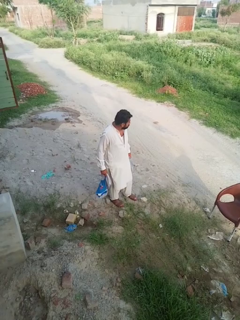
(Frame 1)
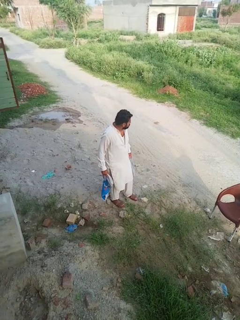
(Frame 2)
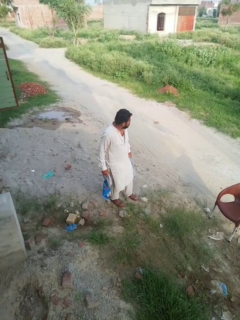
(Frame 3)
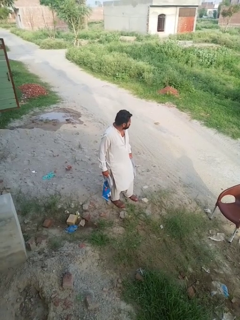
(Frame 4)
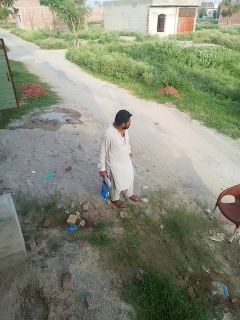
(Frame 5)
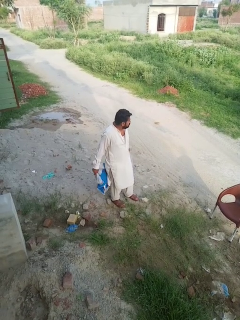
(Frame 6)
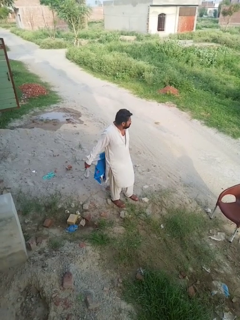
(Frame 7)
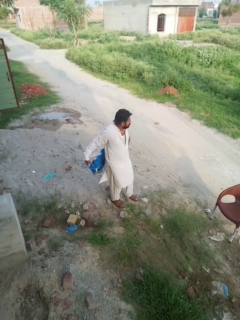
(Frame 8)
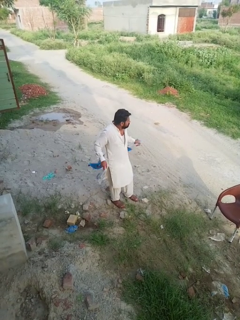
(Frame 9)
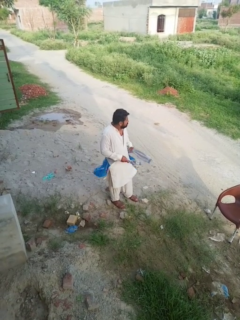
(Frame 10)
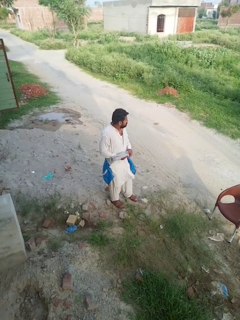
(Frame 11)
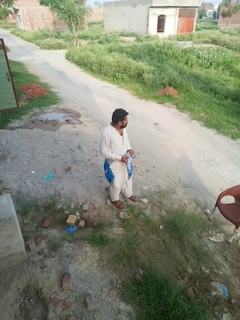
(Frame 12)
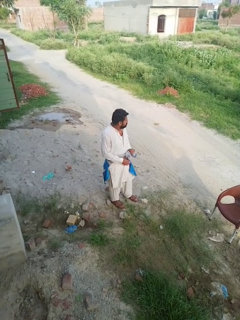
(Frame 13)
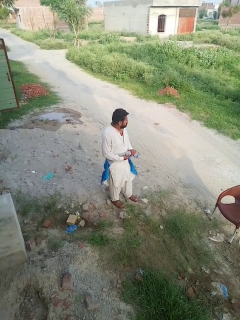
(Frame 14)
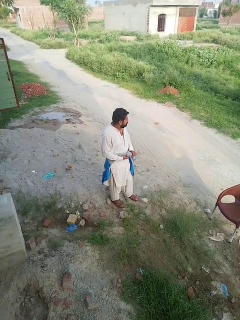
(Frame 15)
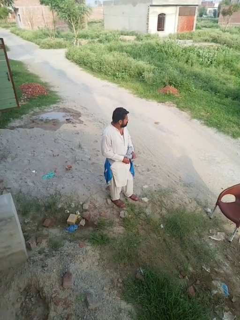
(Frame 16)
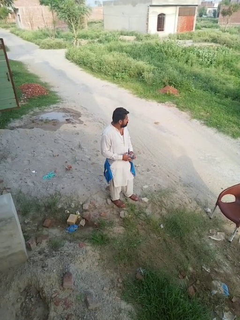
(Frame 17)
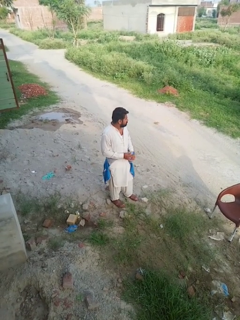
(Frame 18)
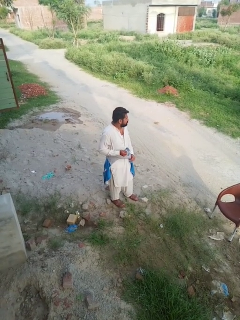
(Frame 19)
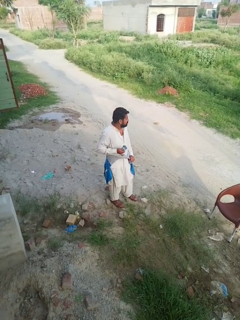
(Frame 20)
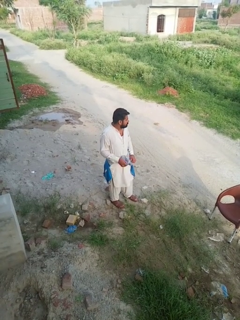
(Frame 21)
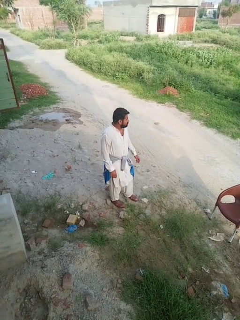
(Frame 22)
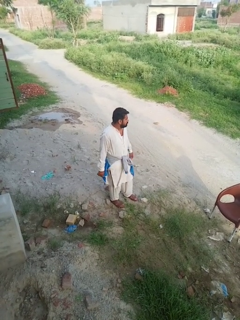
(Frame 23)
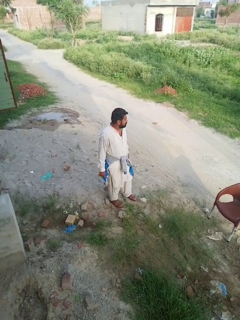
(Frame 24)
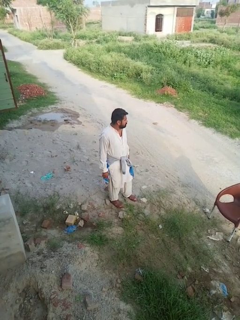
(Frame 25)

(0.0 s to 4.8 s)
person ties jacket around waist

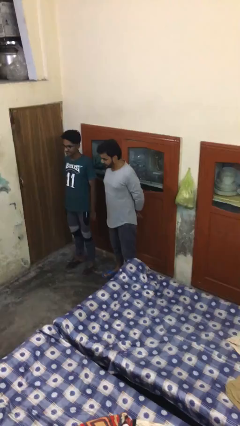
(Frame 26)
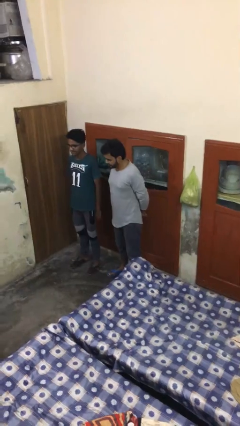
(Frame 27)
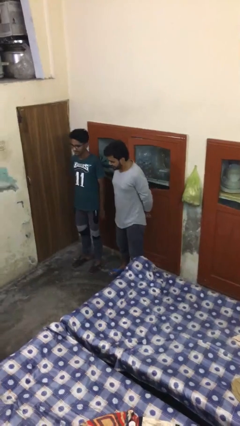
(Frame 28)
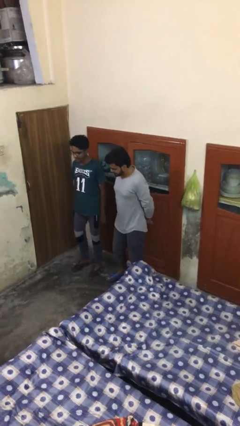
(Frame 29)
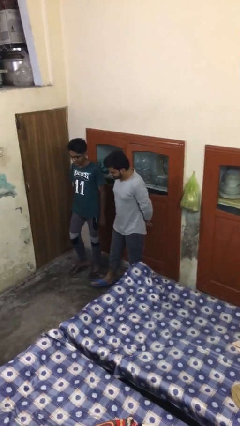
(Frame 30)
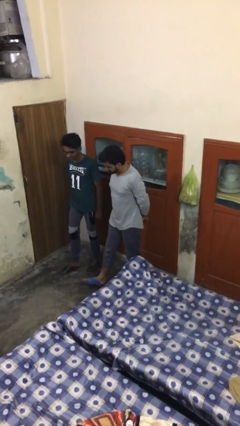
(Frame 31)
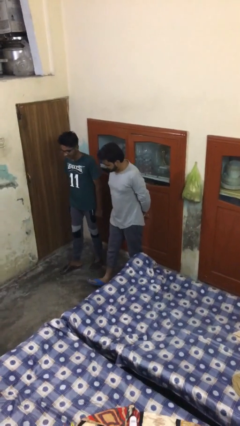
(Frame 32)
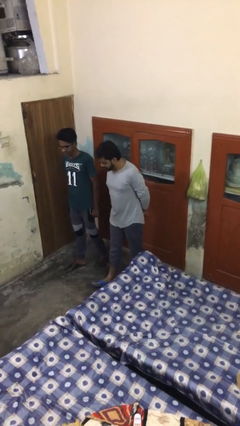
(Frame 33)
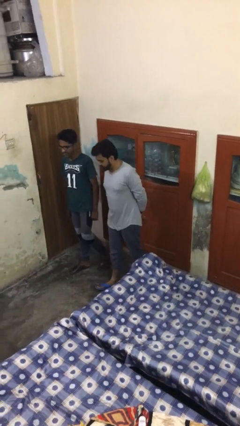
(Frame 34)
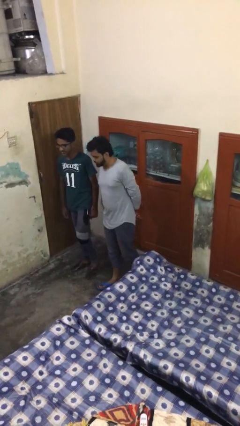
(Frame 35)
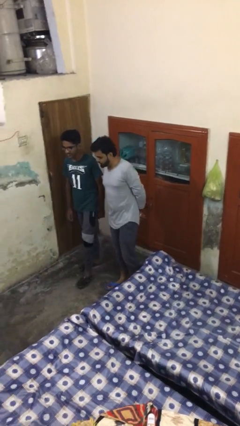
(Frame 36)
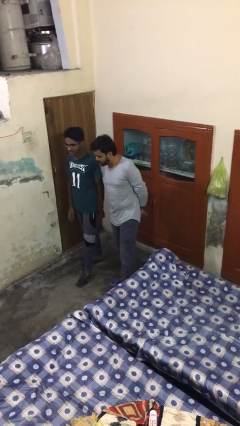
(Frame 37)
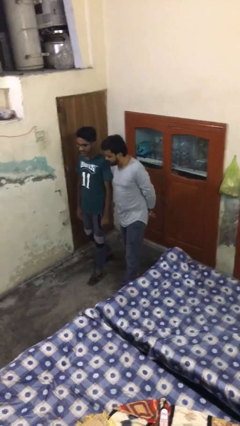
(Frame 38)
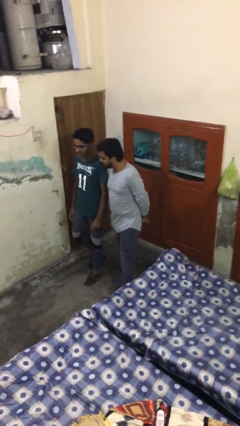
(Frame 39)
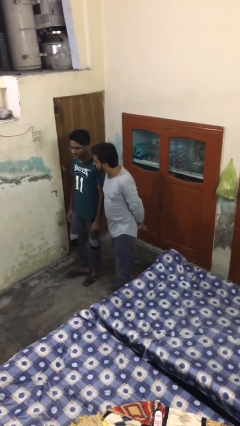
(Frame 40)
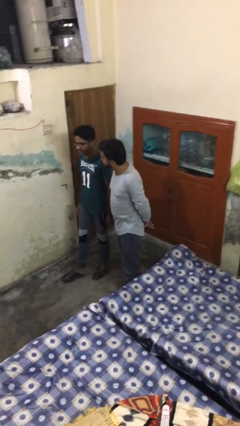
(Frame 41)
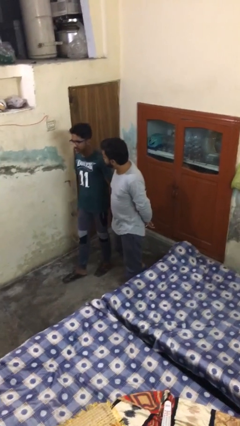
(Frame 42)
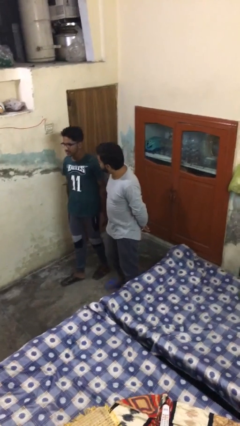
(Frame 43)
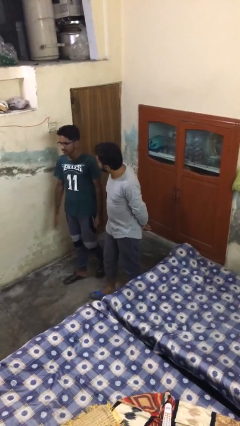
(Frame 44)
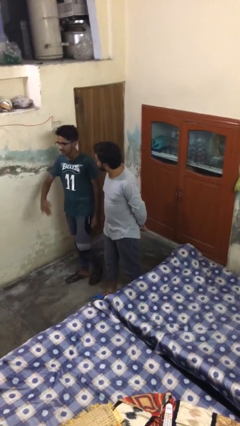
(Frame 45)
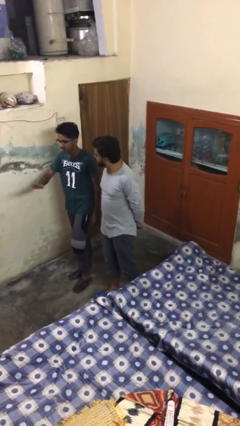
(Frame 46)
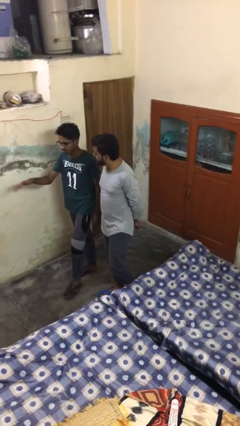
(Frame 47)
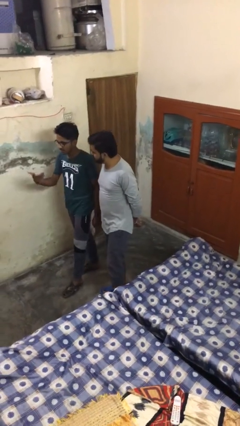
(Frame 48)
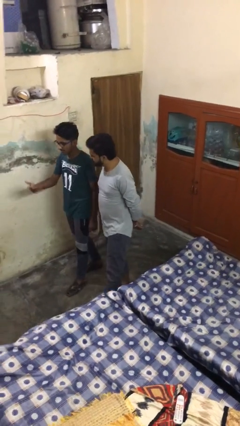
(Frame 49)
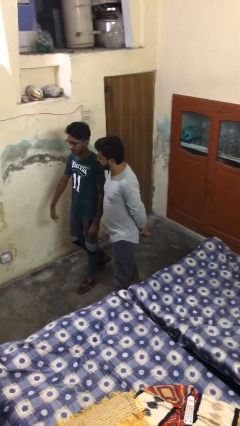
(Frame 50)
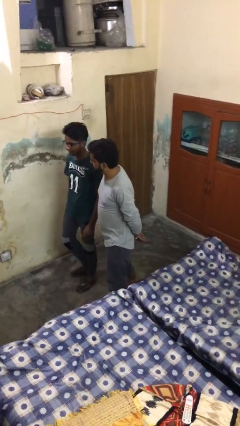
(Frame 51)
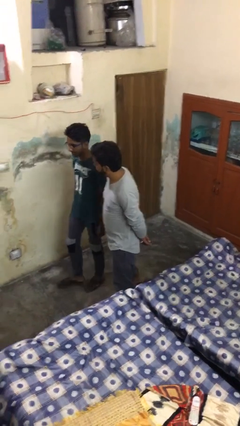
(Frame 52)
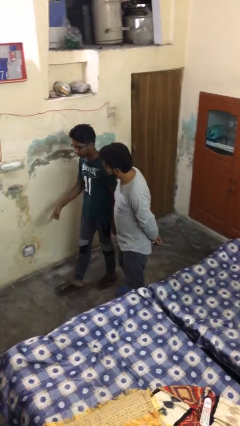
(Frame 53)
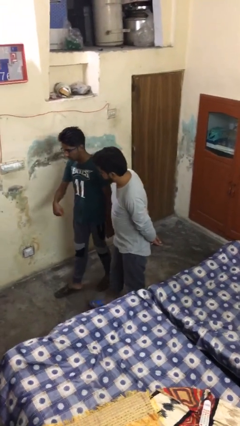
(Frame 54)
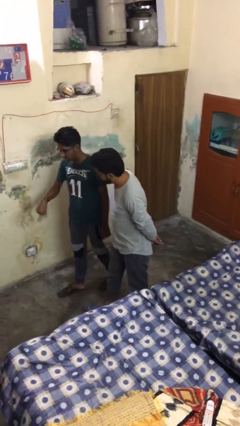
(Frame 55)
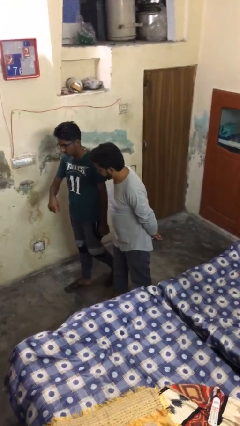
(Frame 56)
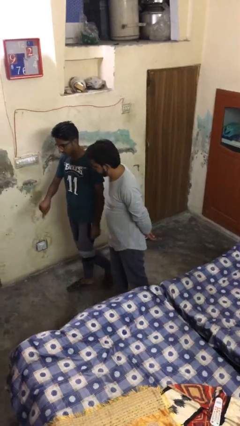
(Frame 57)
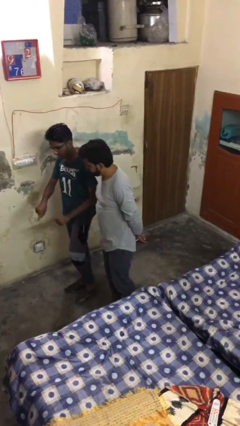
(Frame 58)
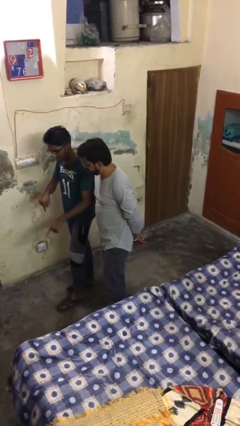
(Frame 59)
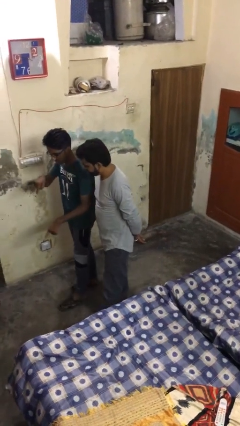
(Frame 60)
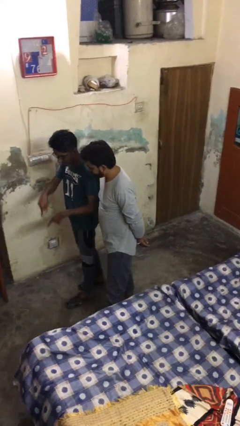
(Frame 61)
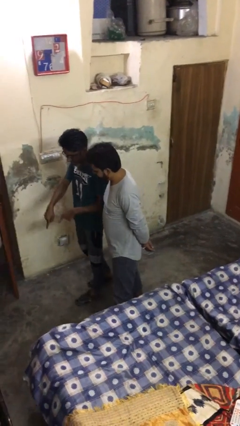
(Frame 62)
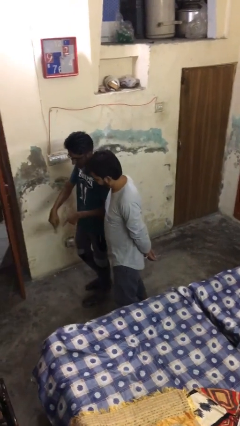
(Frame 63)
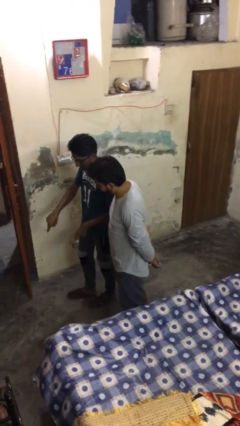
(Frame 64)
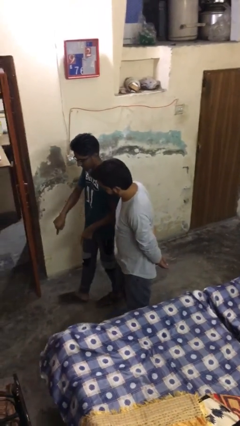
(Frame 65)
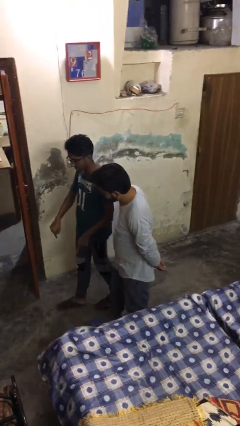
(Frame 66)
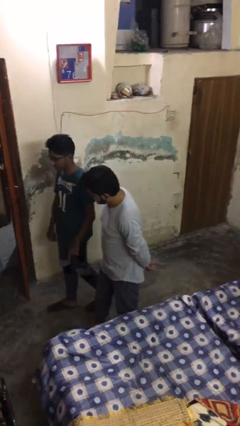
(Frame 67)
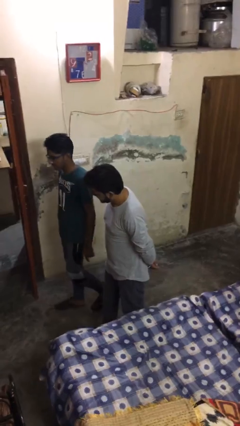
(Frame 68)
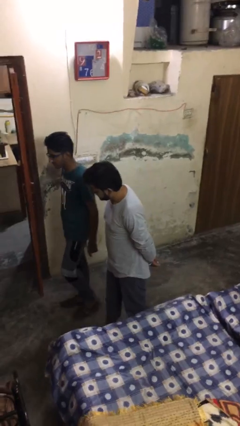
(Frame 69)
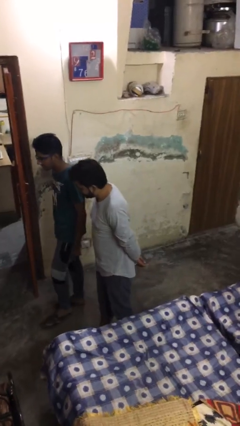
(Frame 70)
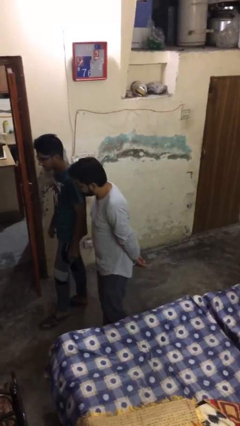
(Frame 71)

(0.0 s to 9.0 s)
person talks to person

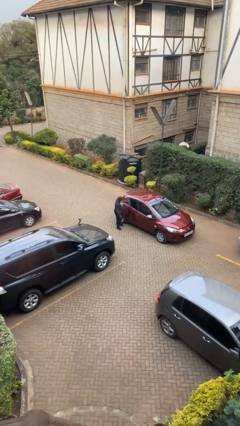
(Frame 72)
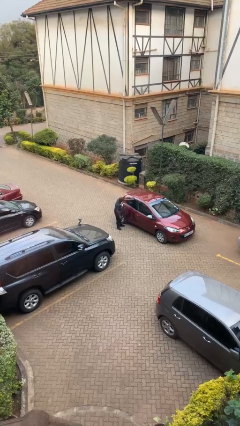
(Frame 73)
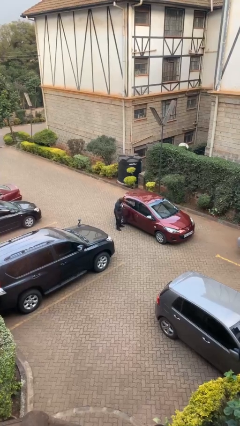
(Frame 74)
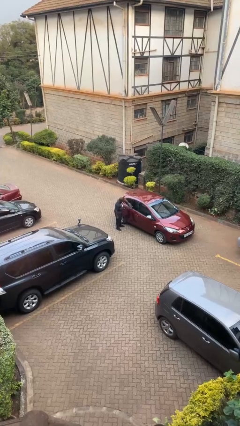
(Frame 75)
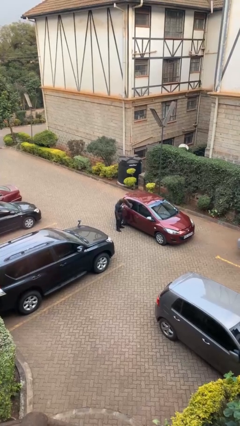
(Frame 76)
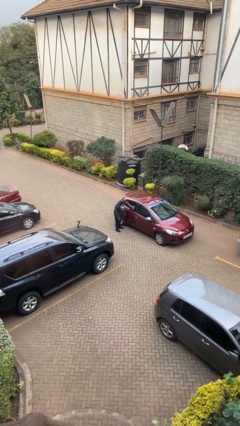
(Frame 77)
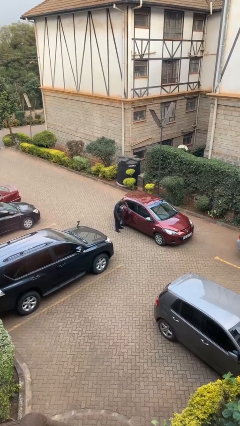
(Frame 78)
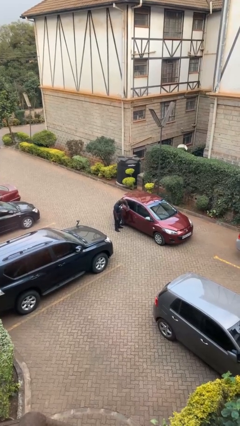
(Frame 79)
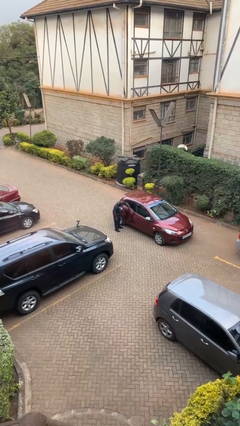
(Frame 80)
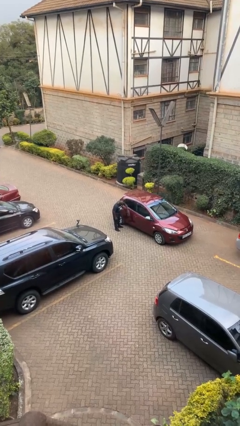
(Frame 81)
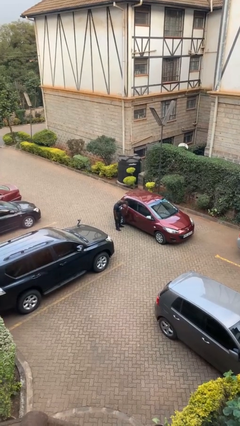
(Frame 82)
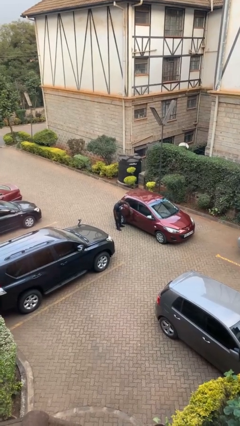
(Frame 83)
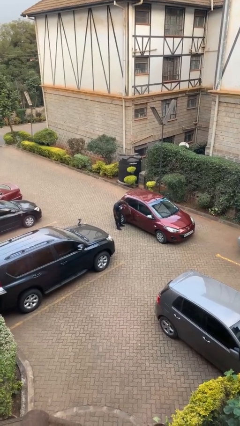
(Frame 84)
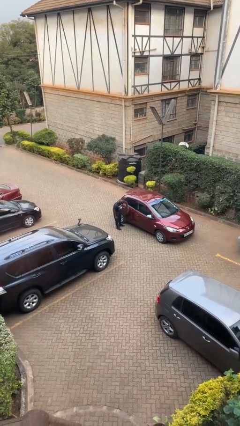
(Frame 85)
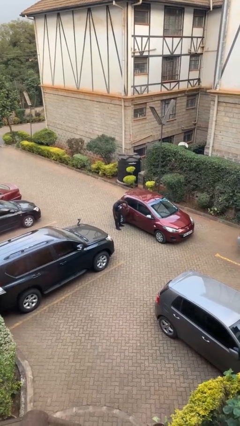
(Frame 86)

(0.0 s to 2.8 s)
person polishes car with rag

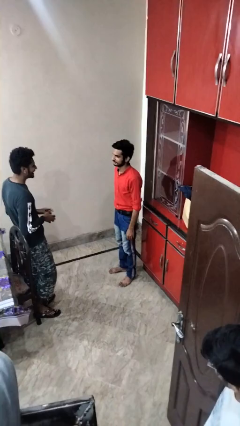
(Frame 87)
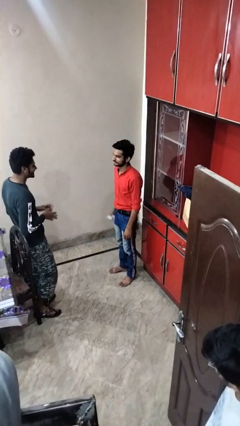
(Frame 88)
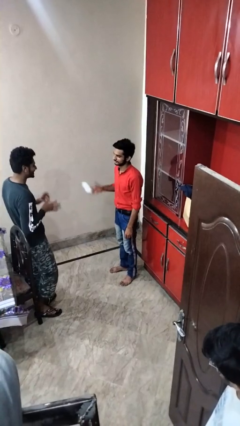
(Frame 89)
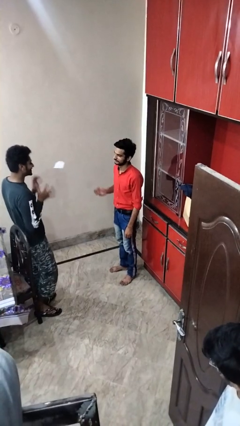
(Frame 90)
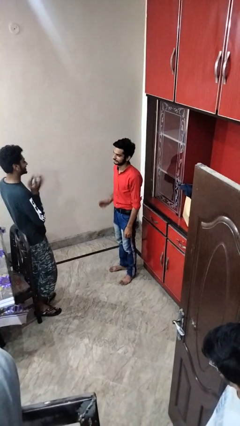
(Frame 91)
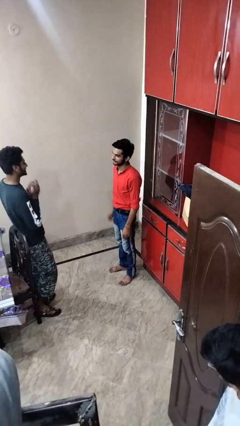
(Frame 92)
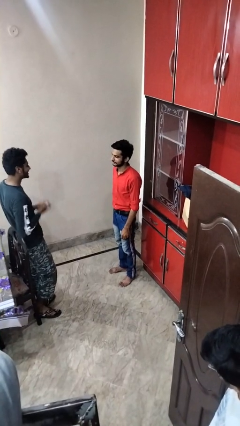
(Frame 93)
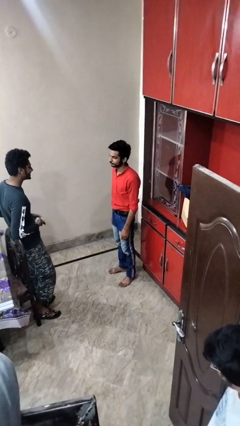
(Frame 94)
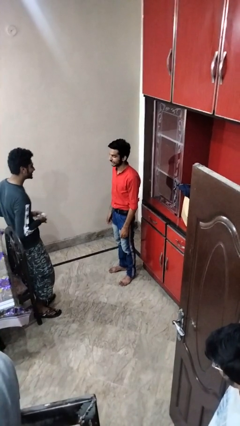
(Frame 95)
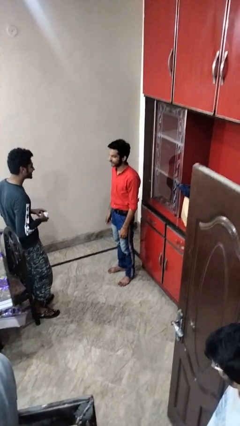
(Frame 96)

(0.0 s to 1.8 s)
person throws object to person

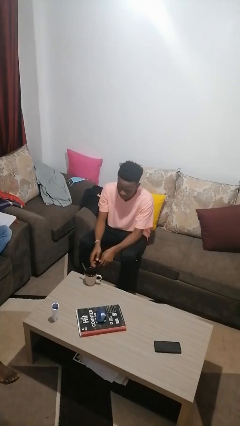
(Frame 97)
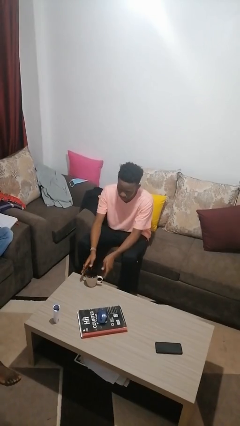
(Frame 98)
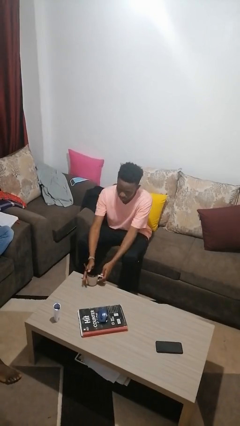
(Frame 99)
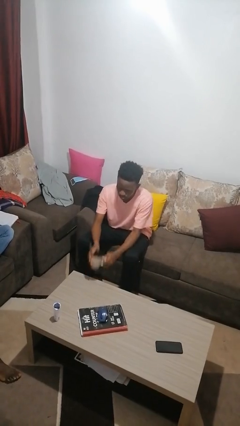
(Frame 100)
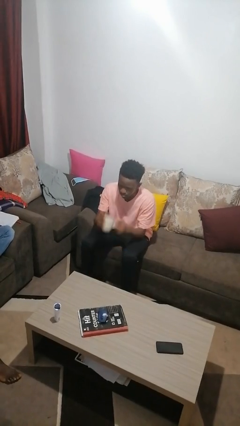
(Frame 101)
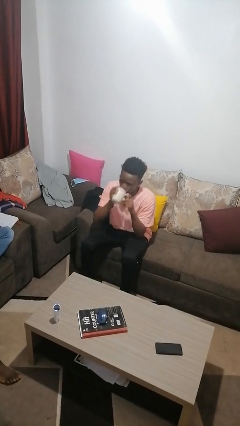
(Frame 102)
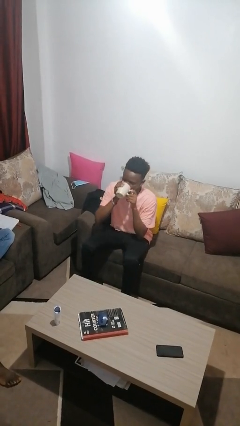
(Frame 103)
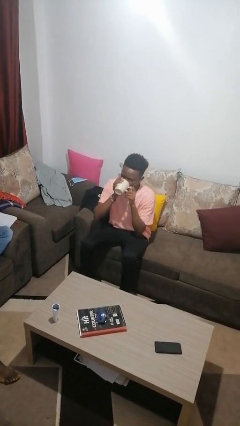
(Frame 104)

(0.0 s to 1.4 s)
person drinks from mug
